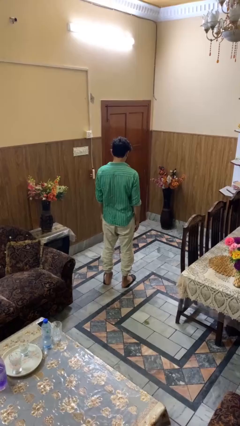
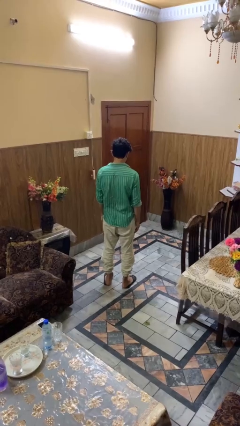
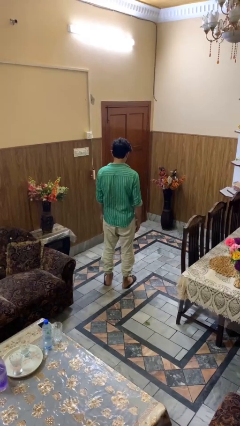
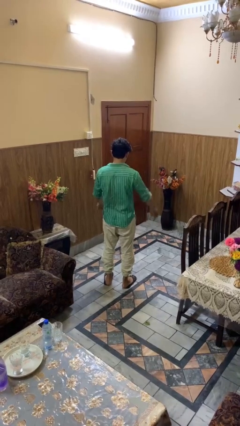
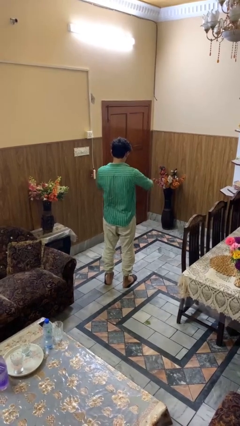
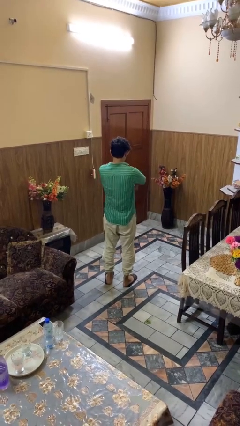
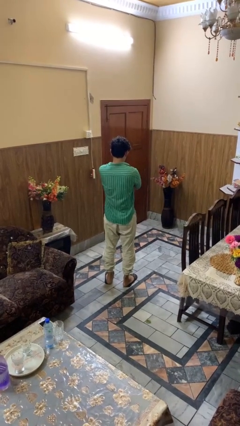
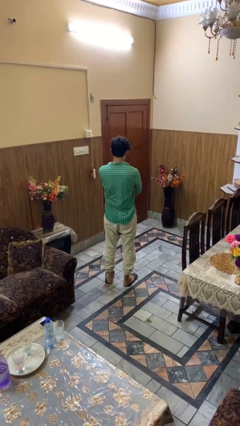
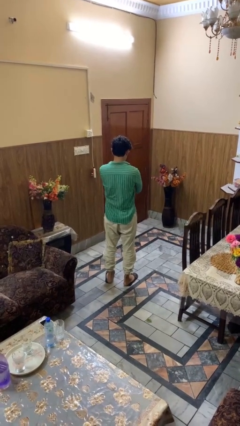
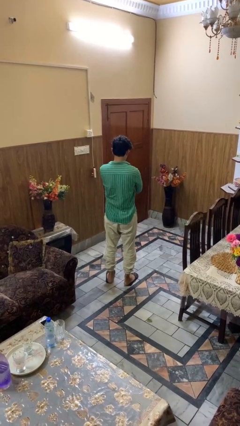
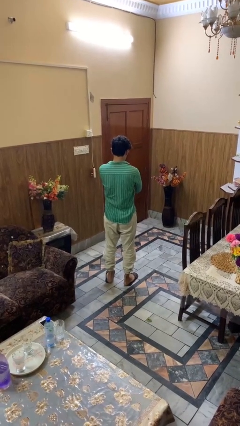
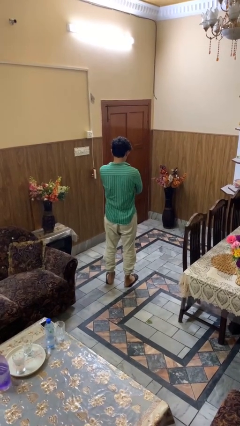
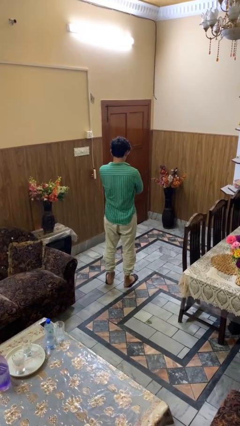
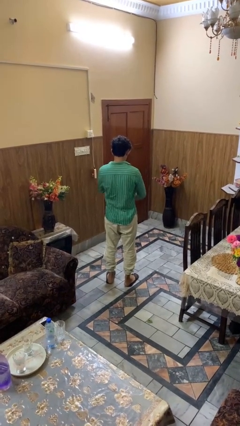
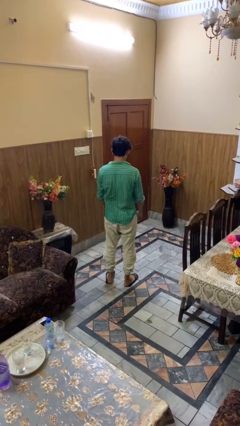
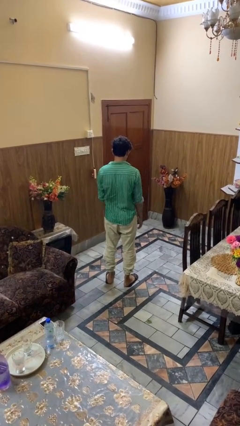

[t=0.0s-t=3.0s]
person crosses arms

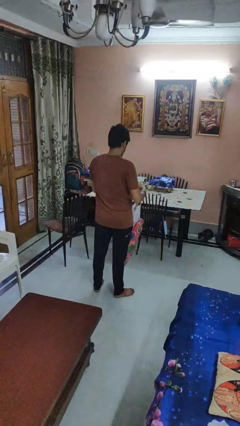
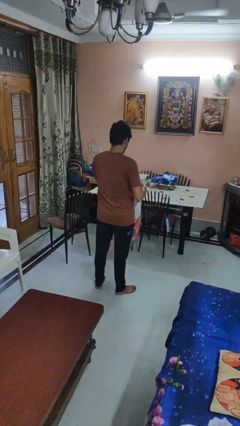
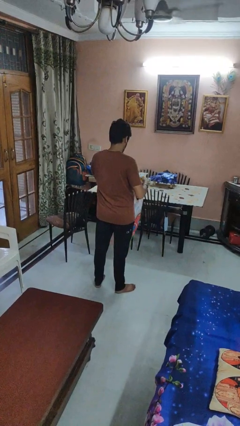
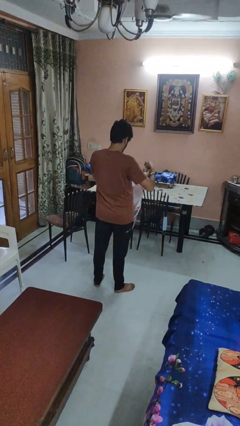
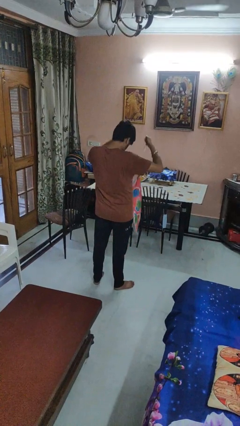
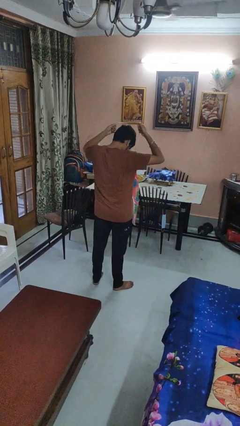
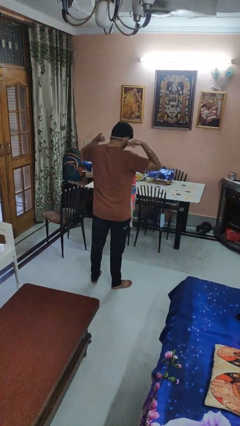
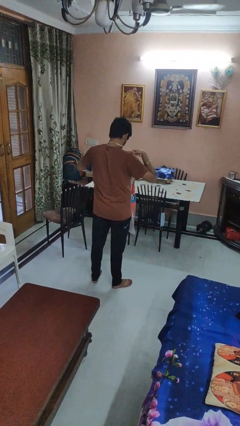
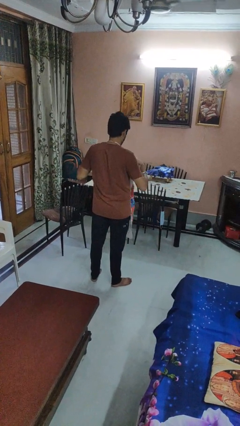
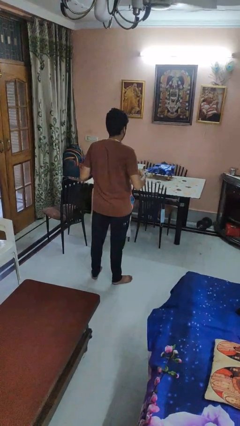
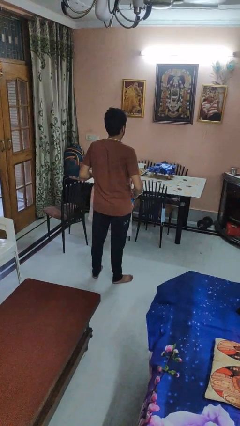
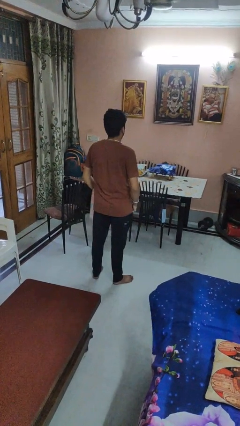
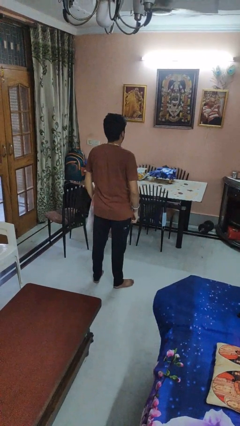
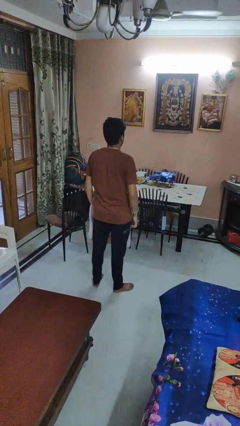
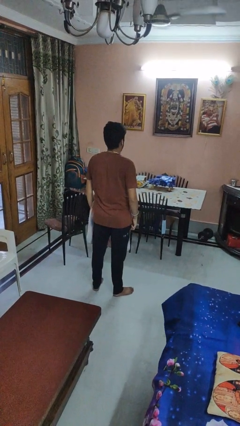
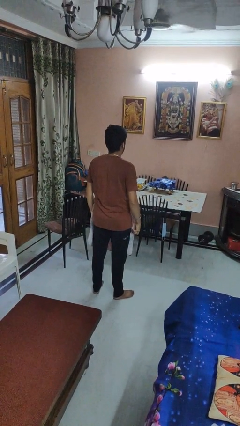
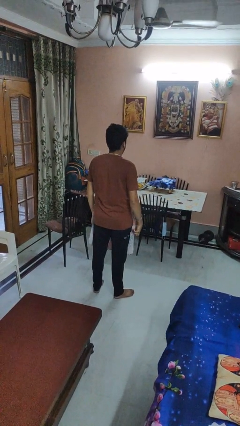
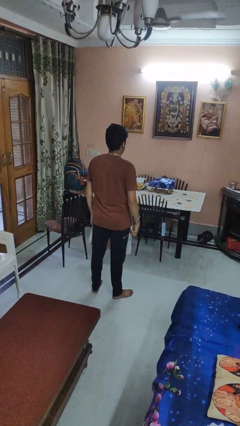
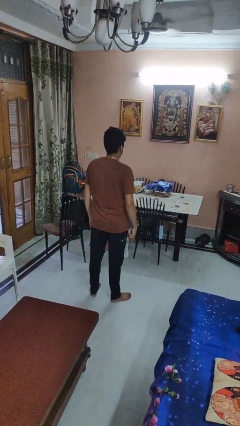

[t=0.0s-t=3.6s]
person puts on apron

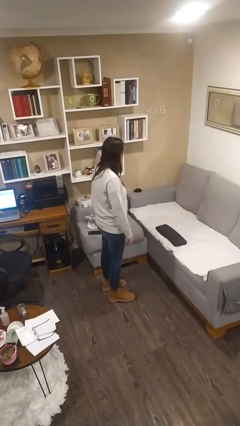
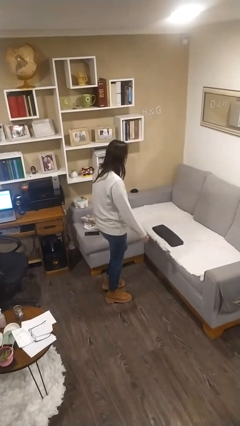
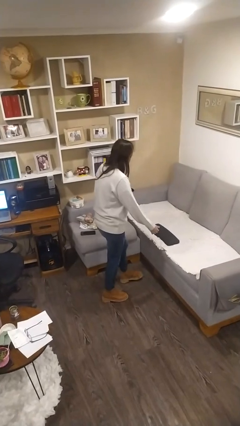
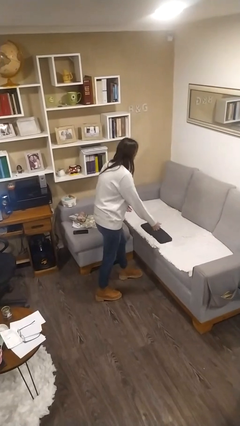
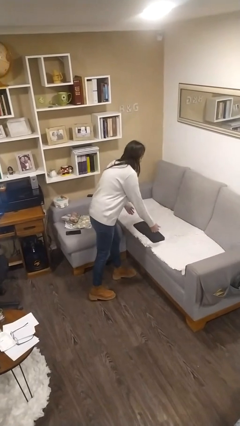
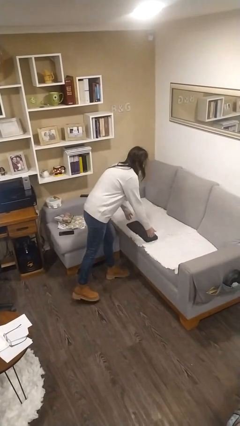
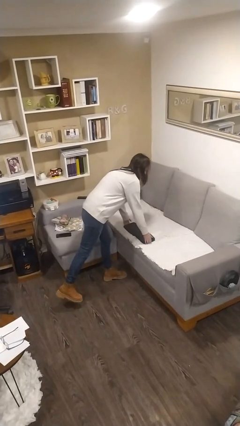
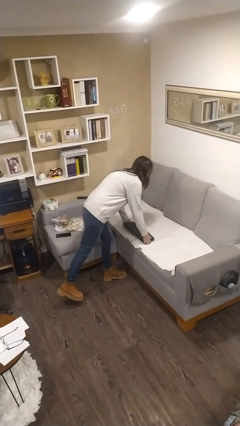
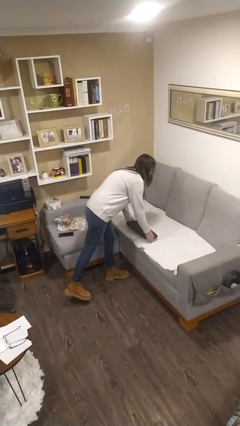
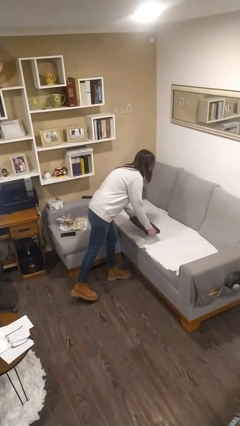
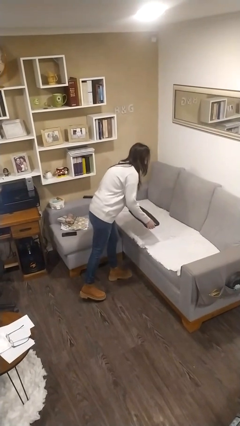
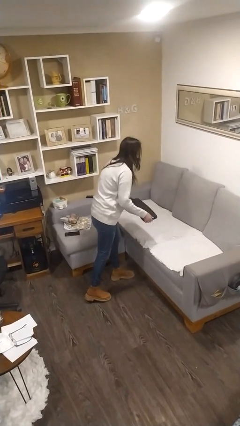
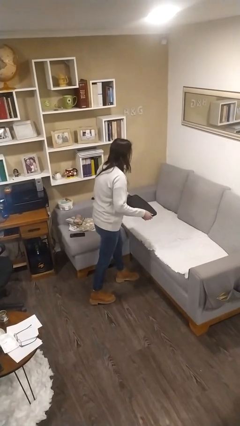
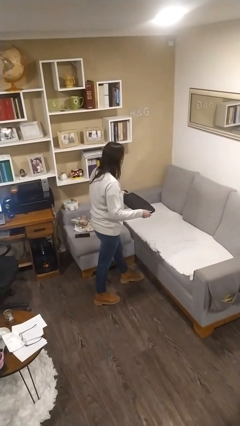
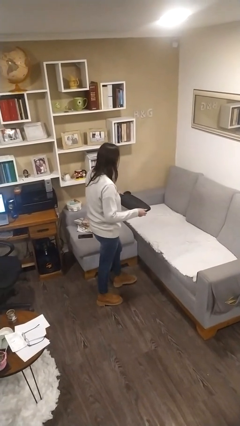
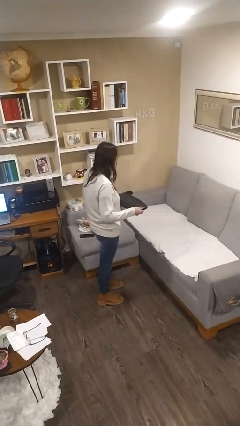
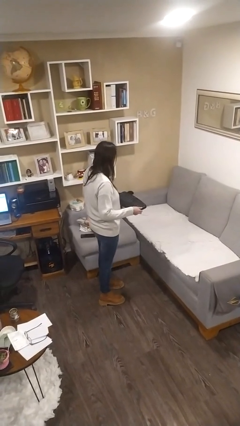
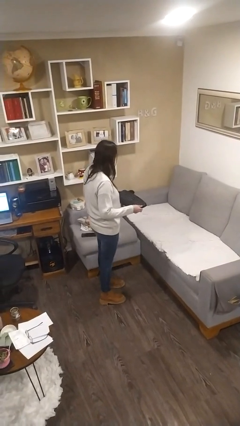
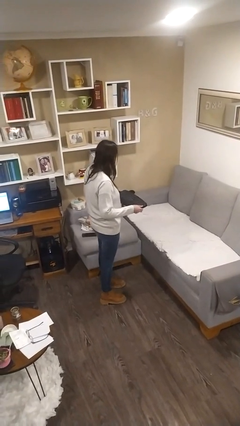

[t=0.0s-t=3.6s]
person picks up object from couch

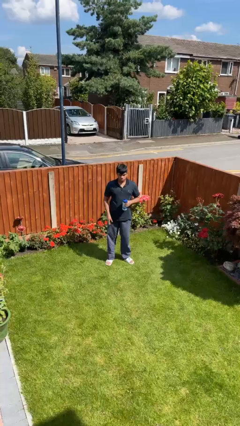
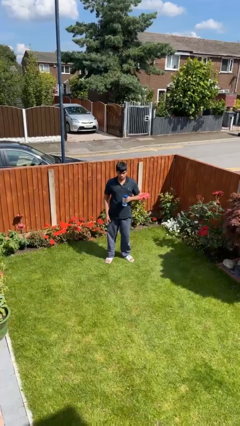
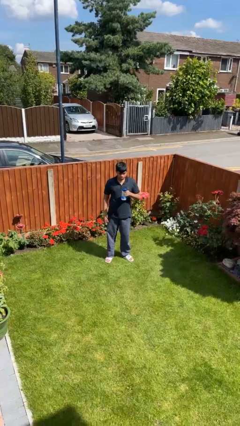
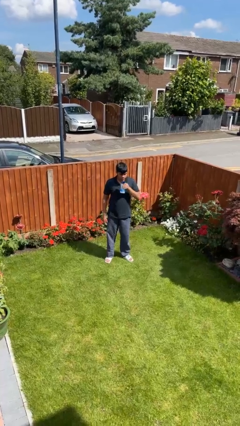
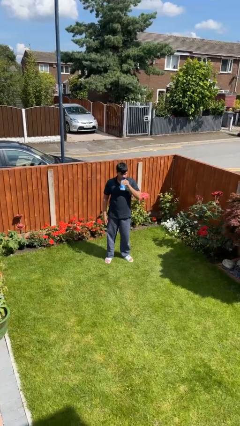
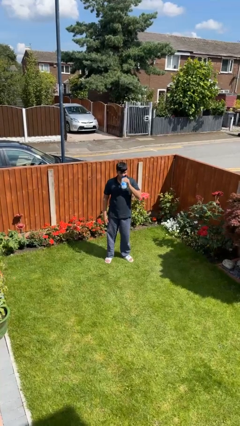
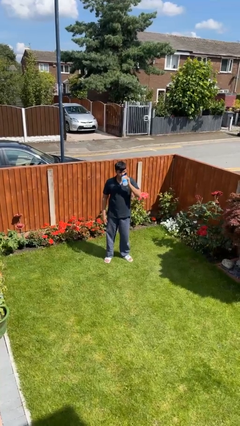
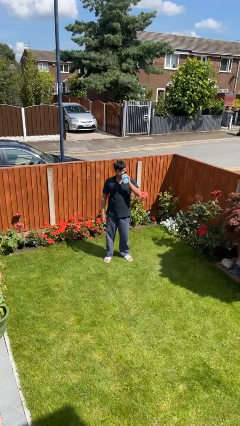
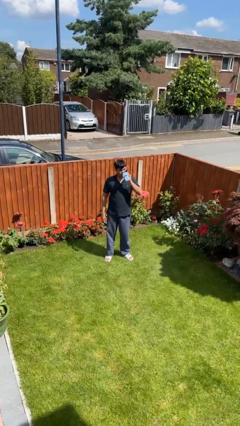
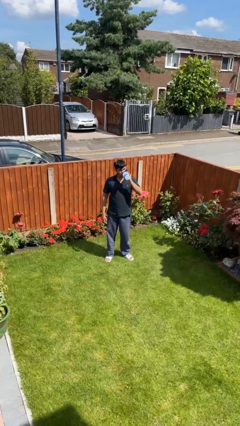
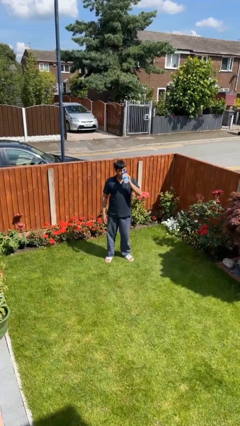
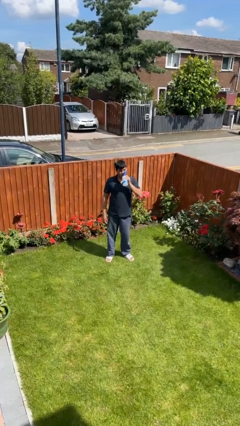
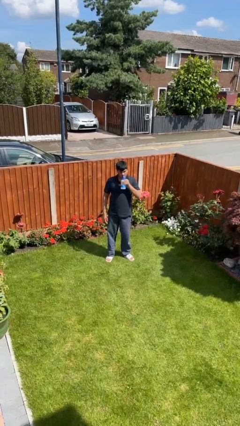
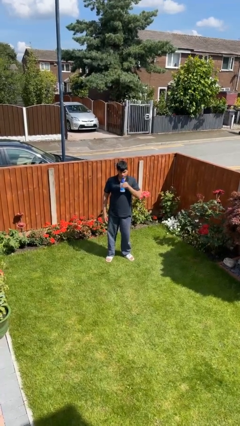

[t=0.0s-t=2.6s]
person drinks from bottle

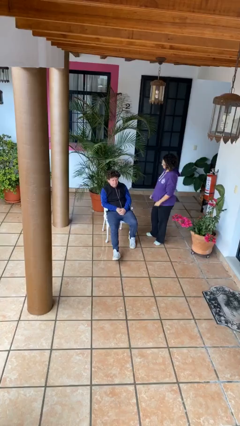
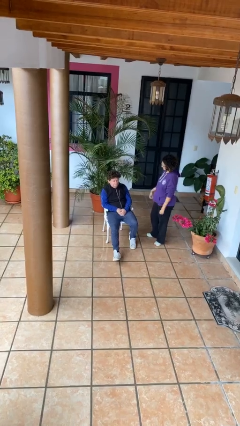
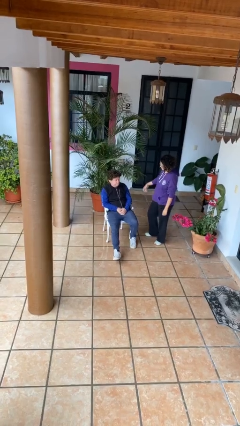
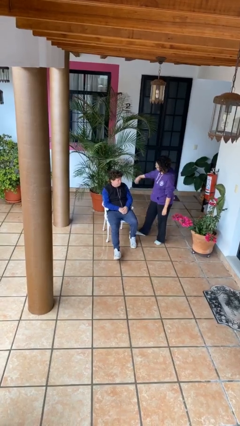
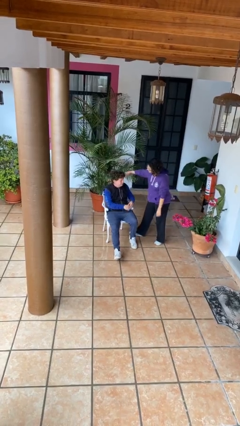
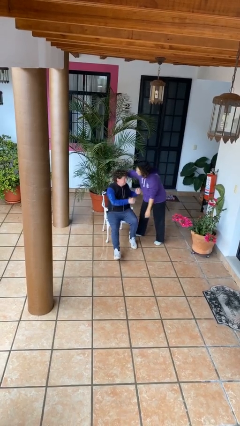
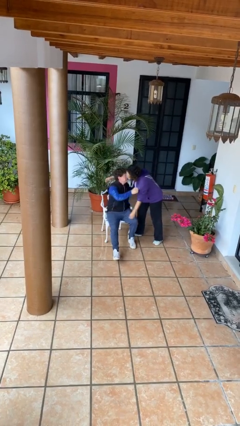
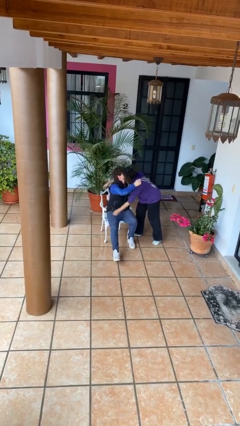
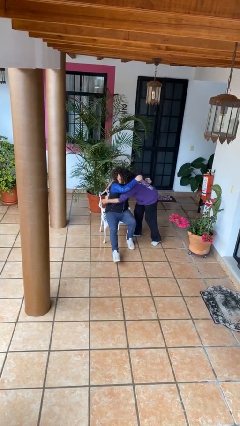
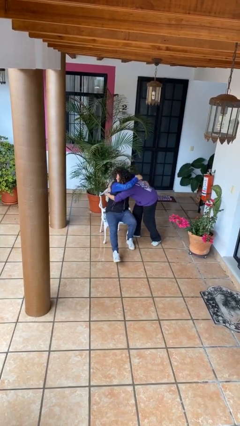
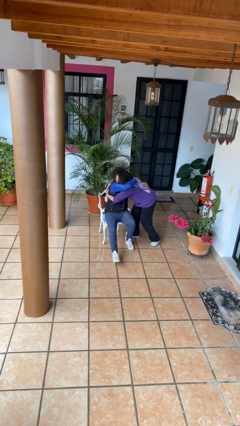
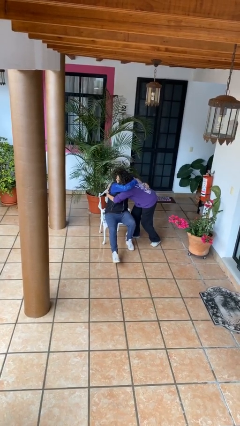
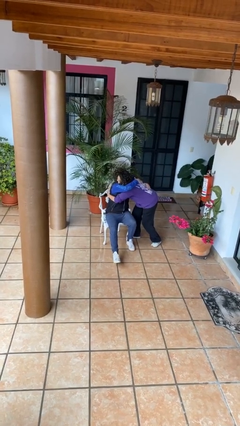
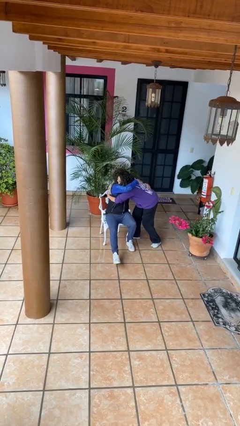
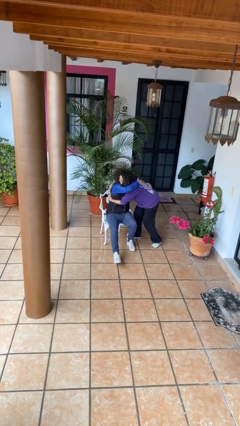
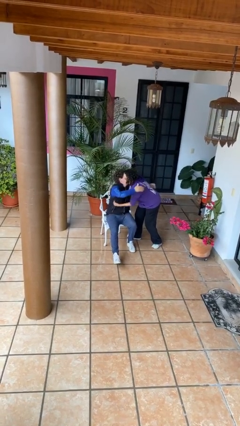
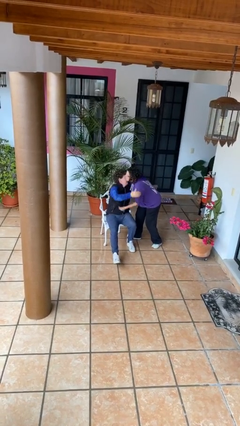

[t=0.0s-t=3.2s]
person embraces person

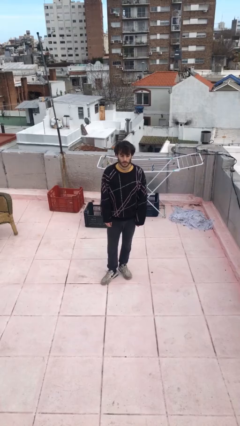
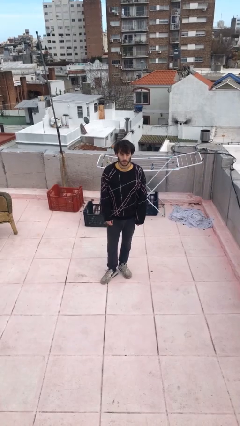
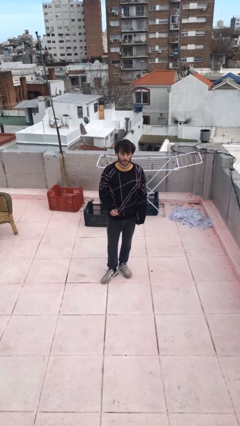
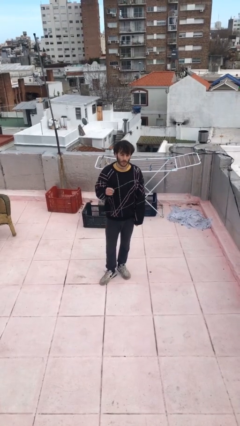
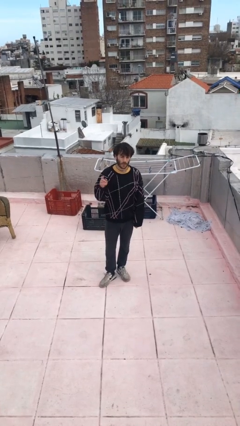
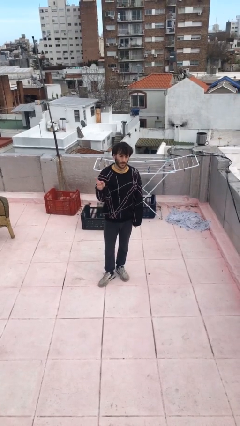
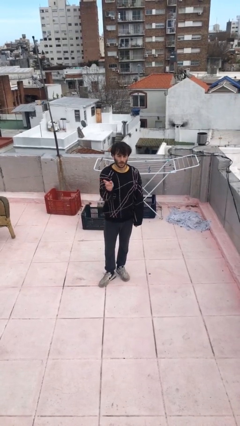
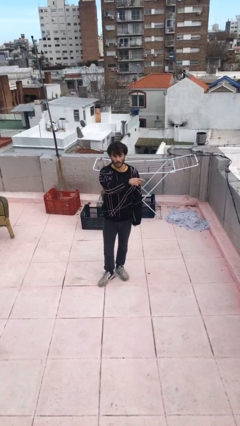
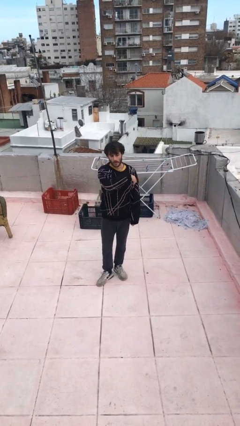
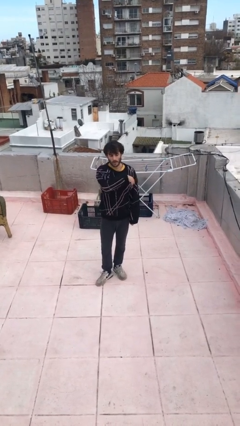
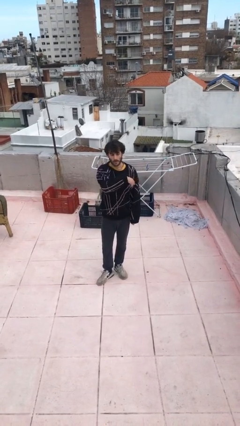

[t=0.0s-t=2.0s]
person gestures swipe left
